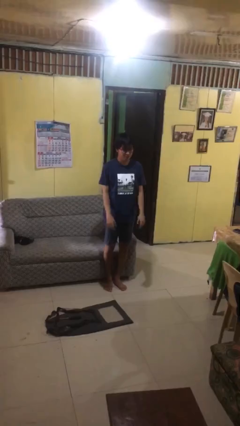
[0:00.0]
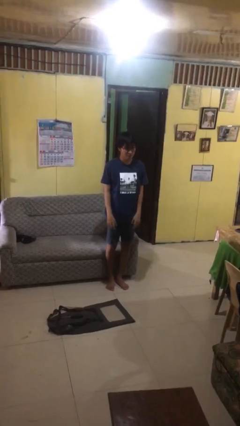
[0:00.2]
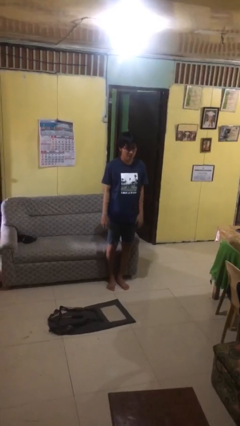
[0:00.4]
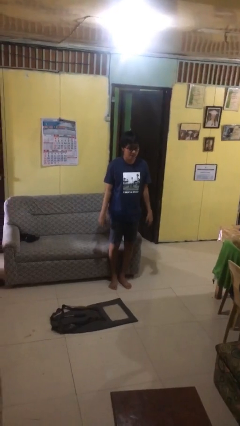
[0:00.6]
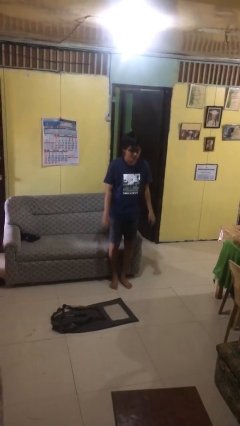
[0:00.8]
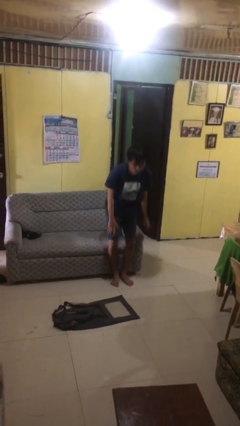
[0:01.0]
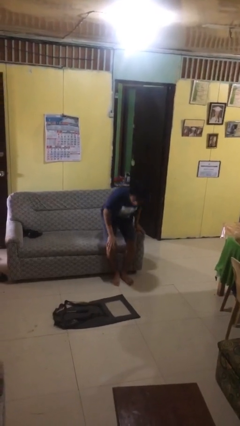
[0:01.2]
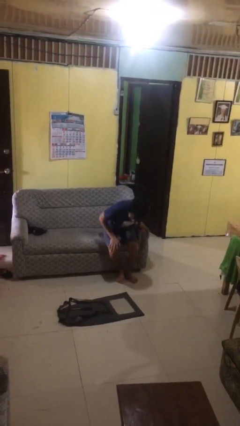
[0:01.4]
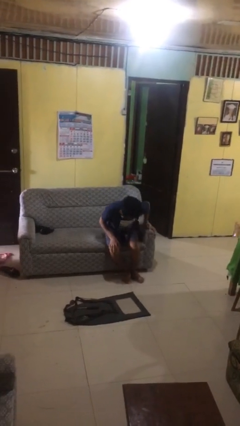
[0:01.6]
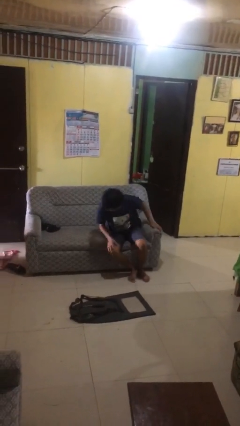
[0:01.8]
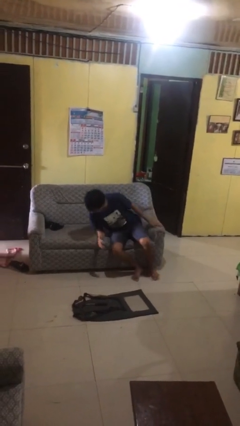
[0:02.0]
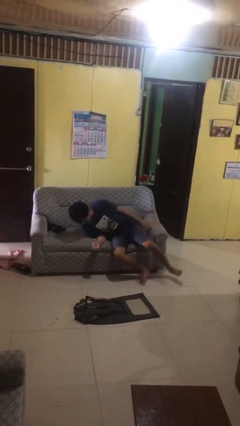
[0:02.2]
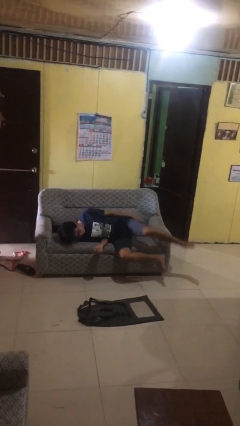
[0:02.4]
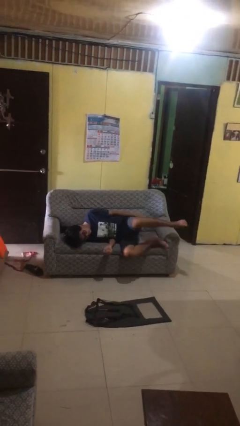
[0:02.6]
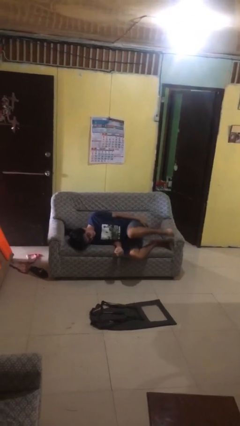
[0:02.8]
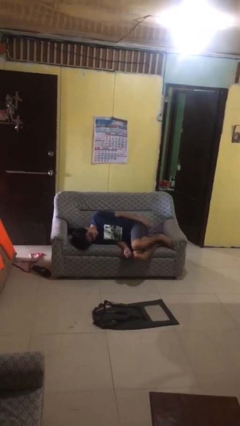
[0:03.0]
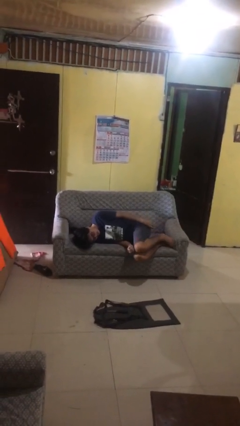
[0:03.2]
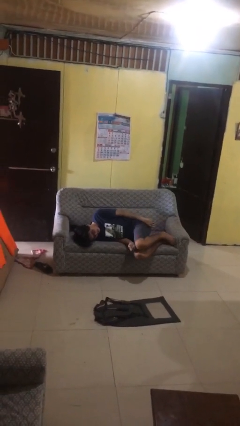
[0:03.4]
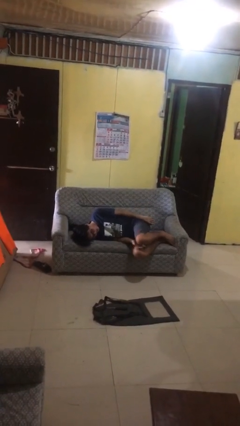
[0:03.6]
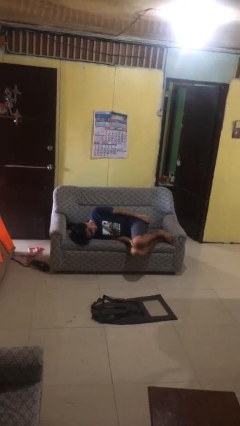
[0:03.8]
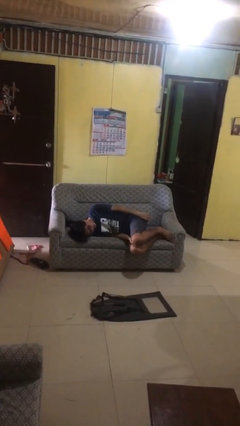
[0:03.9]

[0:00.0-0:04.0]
person lies down on couch

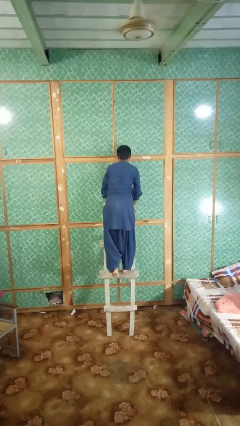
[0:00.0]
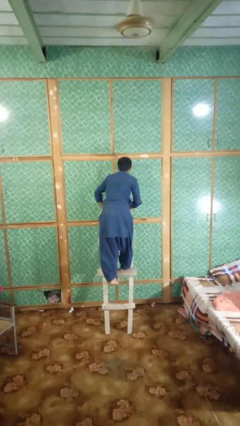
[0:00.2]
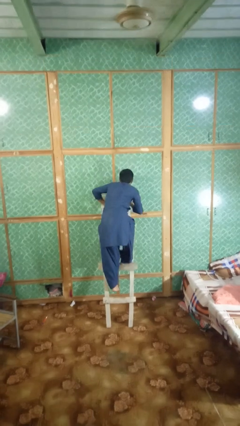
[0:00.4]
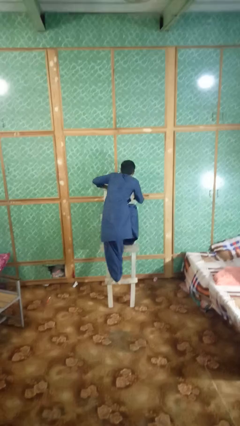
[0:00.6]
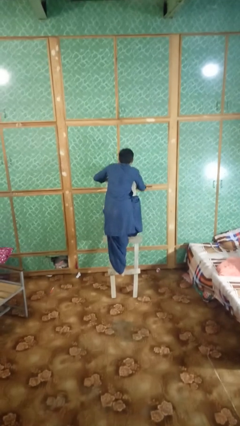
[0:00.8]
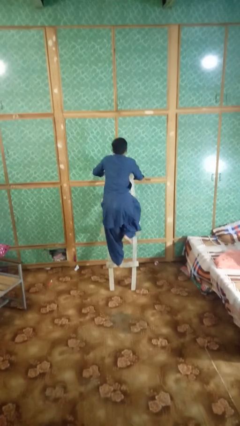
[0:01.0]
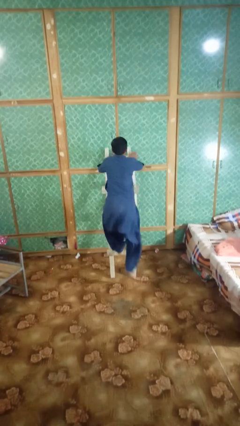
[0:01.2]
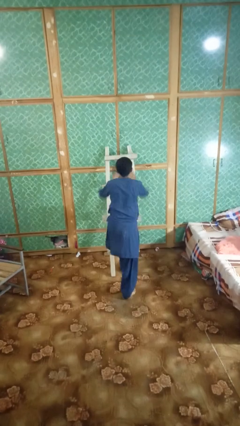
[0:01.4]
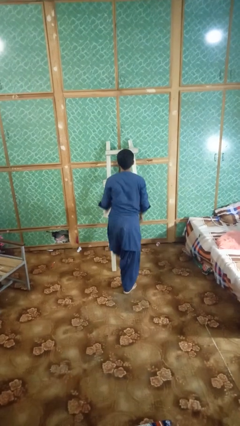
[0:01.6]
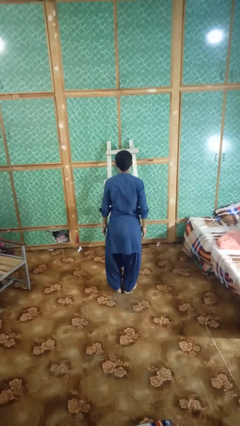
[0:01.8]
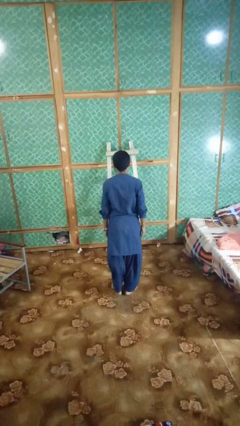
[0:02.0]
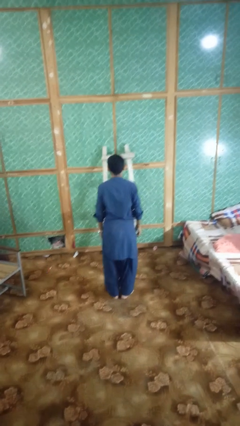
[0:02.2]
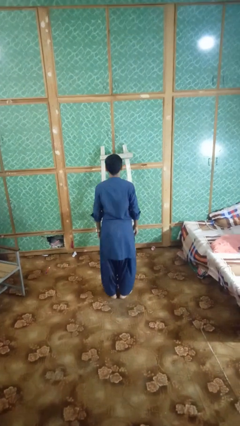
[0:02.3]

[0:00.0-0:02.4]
person climbs down ladder

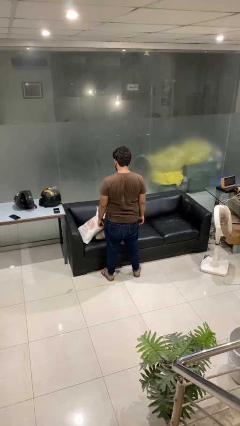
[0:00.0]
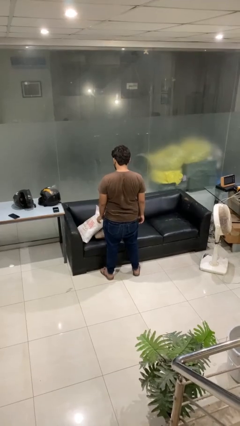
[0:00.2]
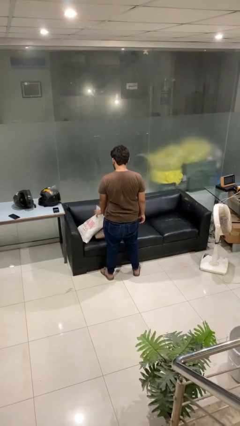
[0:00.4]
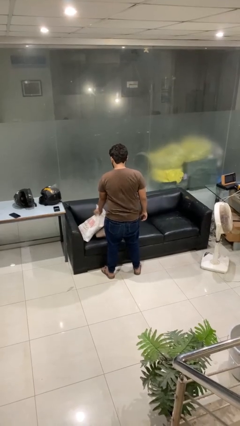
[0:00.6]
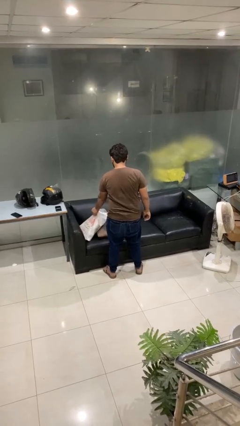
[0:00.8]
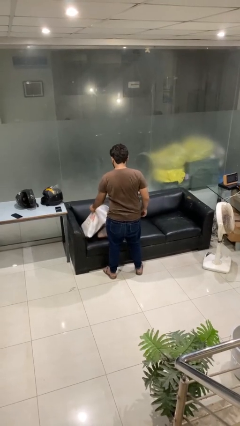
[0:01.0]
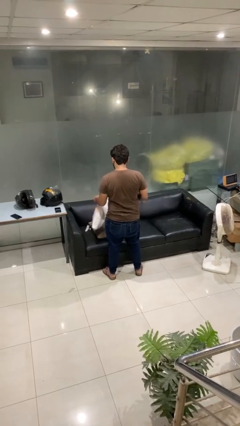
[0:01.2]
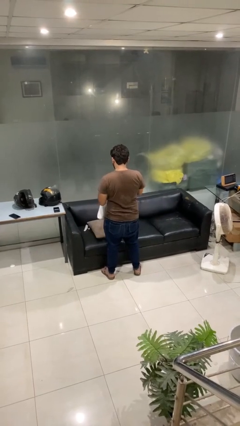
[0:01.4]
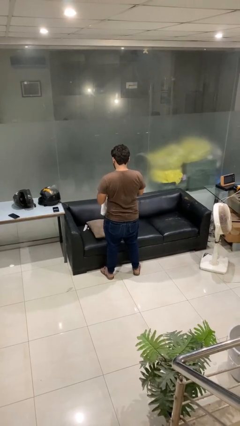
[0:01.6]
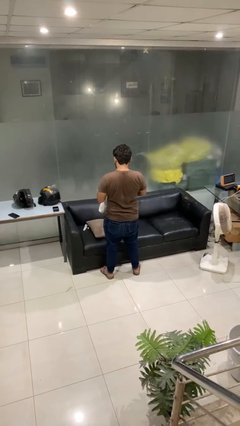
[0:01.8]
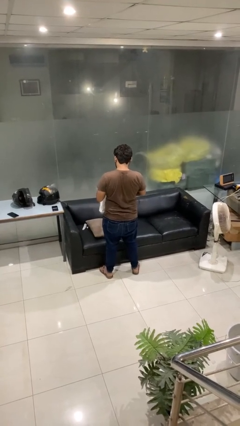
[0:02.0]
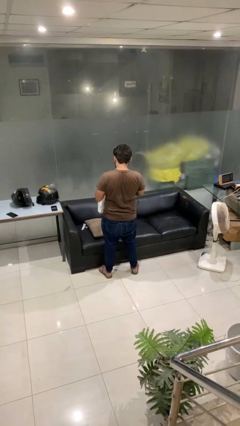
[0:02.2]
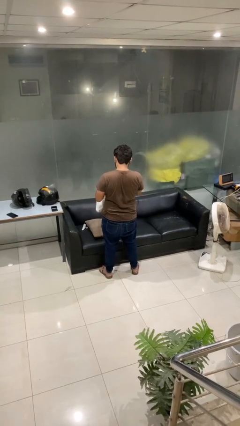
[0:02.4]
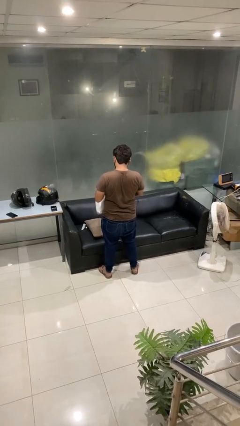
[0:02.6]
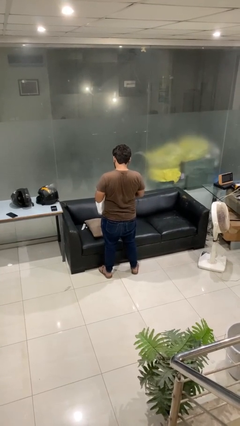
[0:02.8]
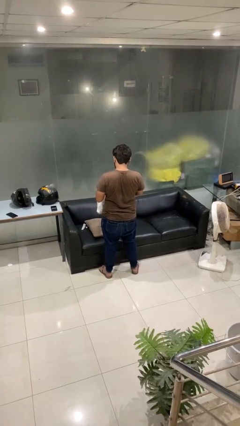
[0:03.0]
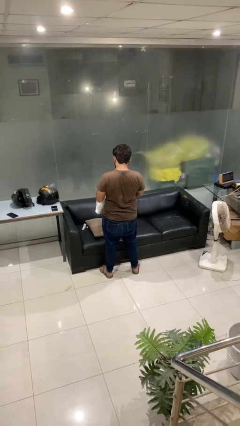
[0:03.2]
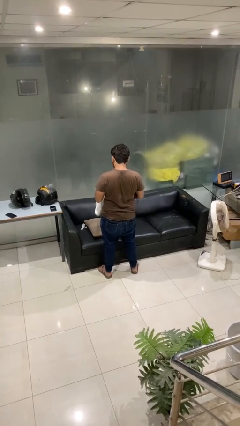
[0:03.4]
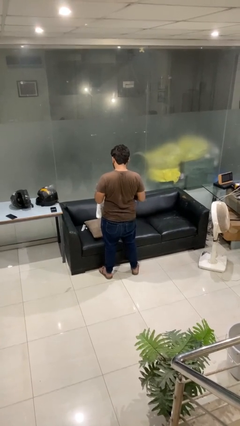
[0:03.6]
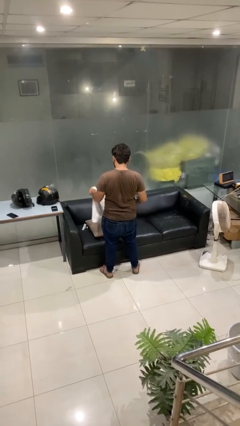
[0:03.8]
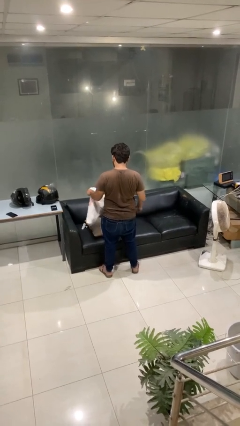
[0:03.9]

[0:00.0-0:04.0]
person searches in bag

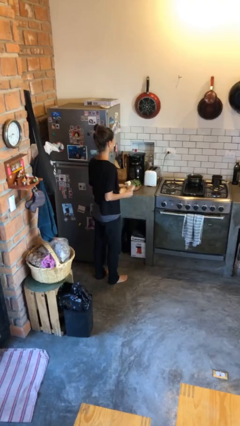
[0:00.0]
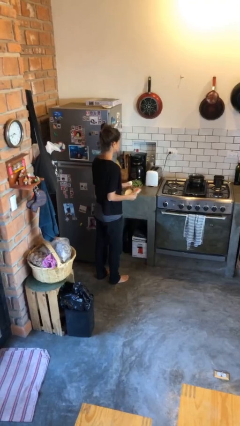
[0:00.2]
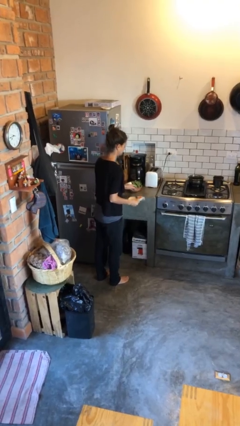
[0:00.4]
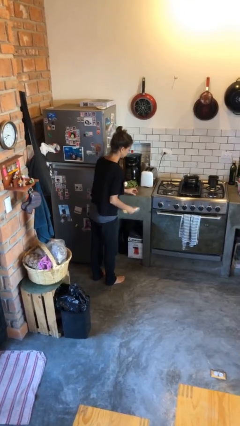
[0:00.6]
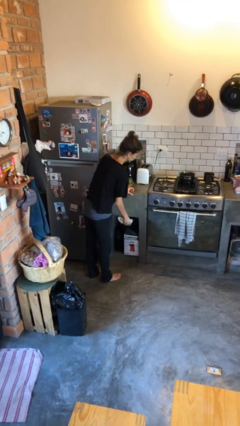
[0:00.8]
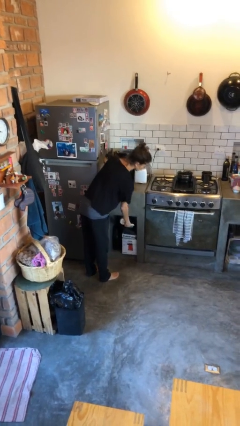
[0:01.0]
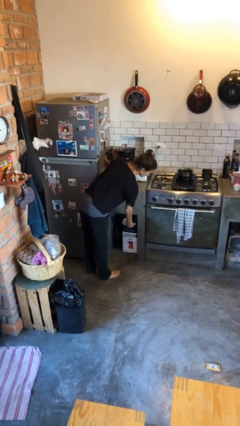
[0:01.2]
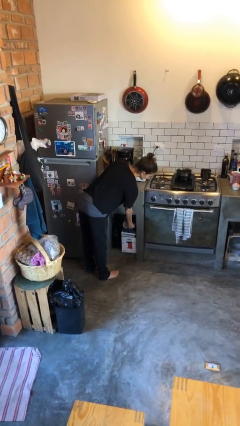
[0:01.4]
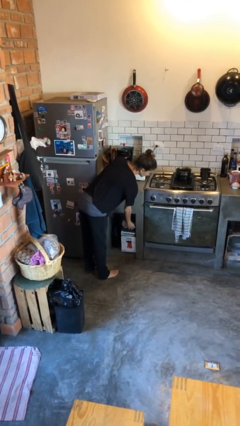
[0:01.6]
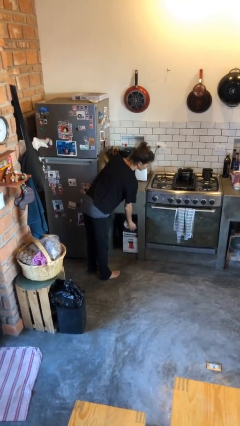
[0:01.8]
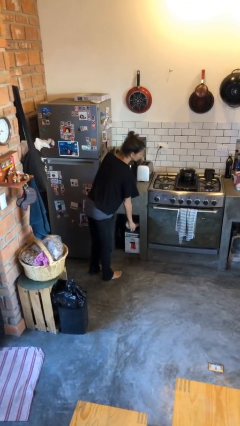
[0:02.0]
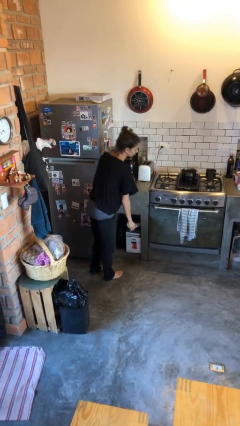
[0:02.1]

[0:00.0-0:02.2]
person puts down object into cabinet

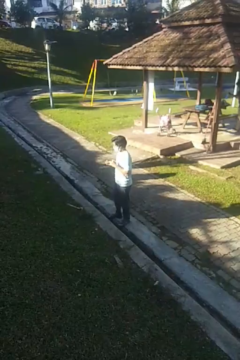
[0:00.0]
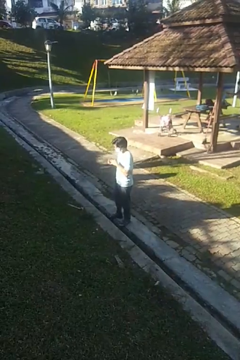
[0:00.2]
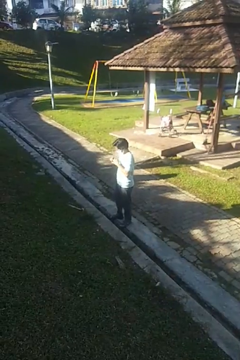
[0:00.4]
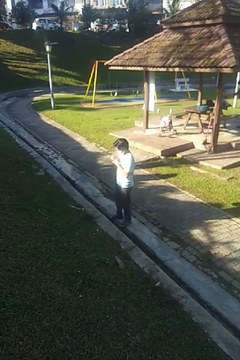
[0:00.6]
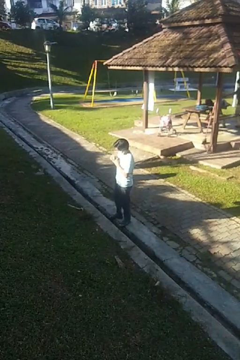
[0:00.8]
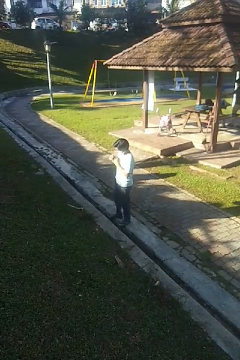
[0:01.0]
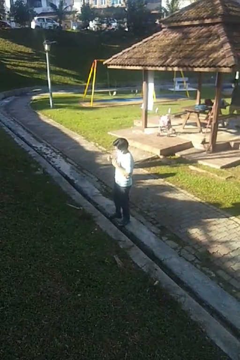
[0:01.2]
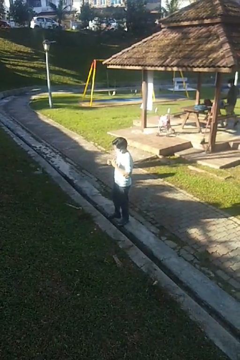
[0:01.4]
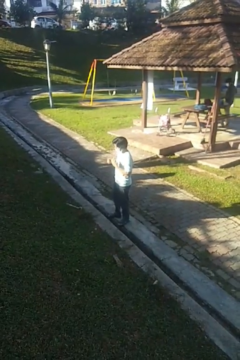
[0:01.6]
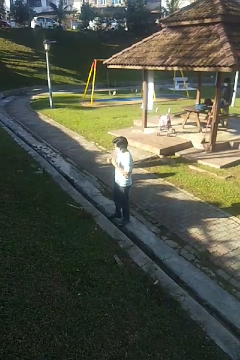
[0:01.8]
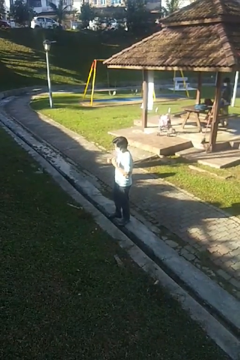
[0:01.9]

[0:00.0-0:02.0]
person puts on ring

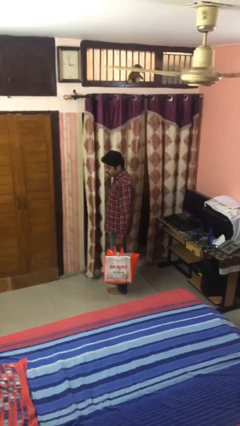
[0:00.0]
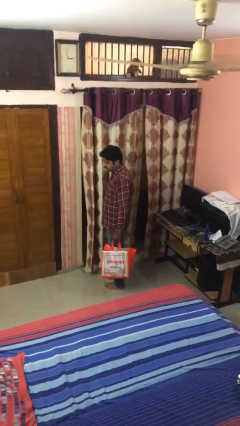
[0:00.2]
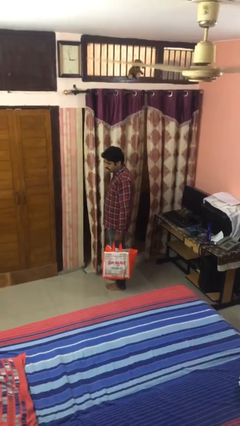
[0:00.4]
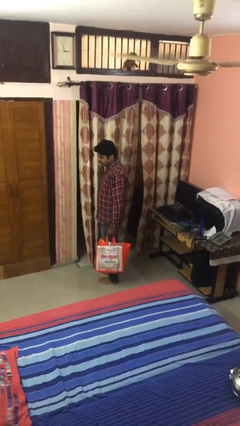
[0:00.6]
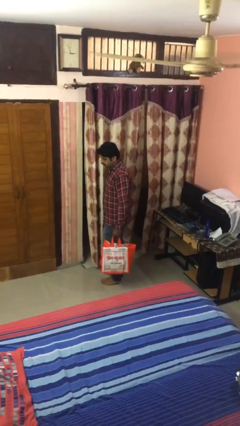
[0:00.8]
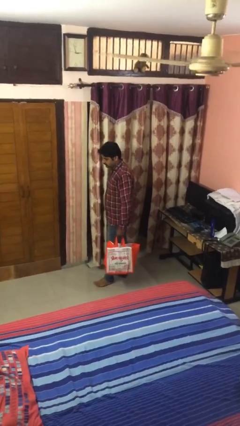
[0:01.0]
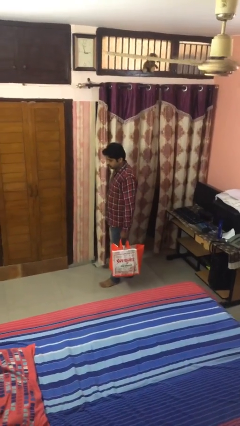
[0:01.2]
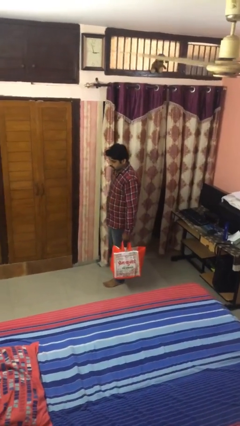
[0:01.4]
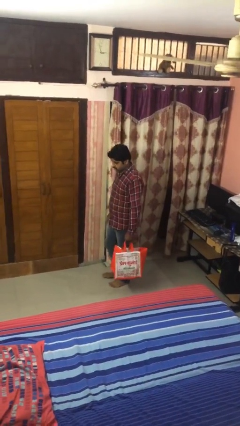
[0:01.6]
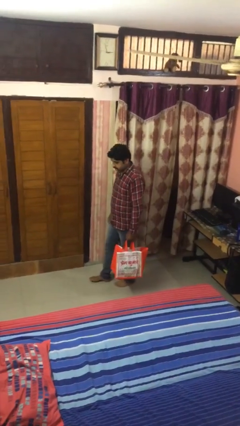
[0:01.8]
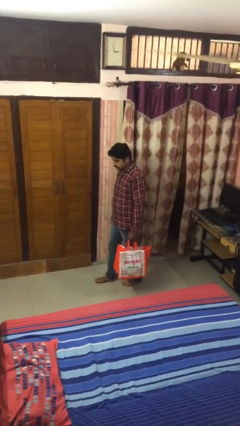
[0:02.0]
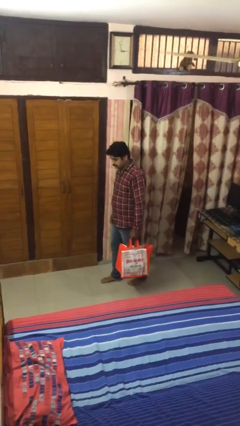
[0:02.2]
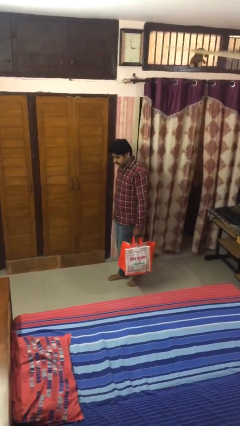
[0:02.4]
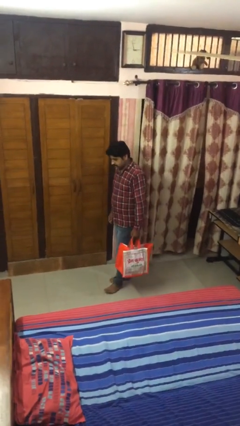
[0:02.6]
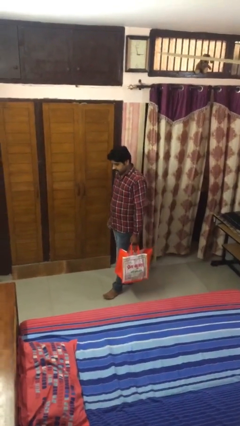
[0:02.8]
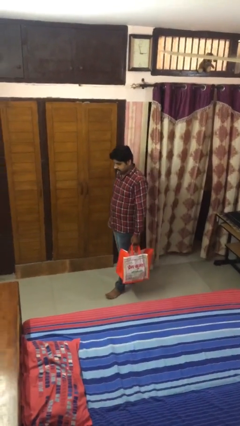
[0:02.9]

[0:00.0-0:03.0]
person carries groceries
